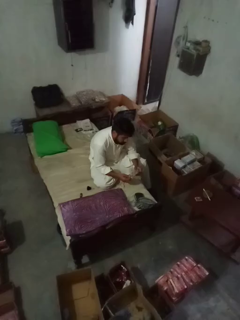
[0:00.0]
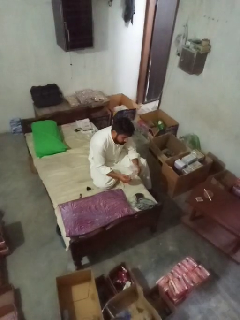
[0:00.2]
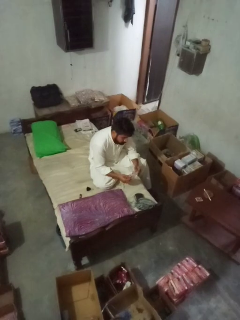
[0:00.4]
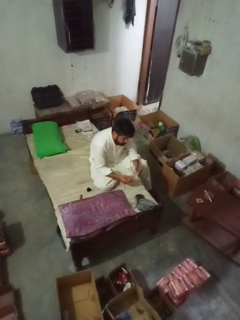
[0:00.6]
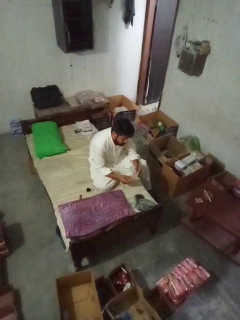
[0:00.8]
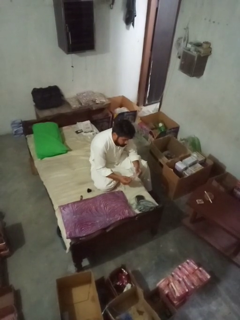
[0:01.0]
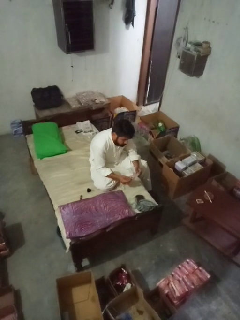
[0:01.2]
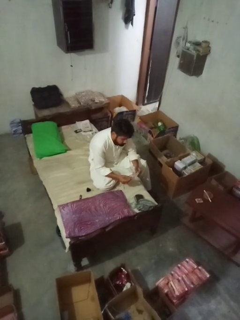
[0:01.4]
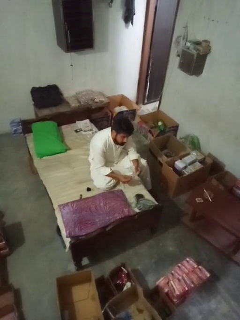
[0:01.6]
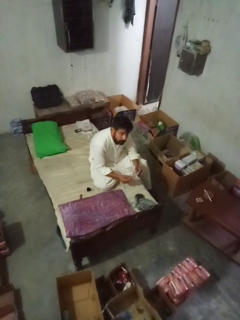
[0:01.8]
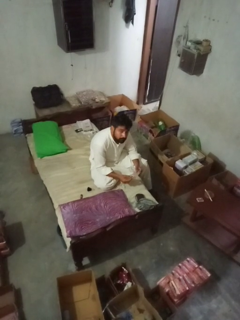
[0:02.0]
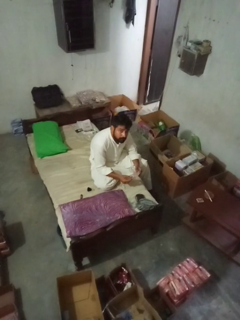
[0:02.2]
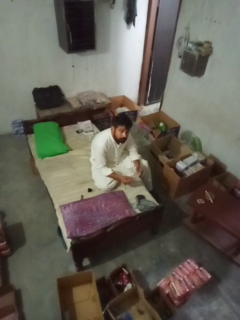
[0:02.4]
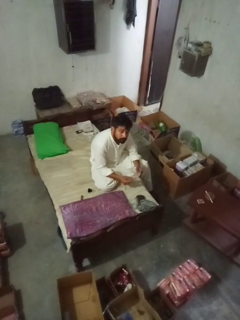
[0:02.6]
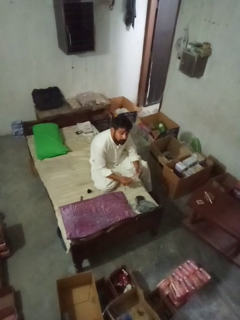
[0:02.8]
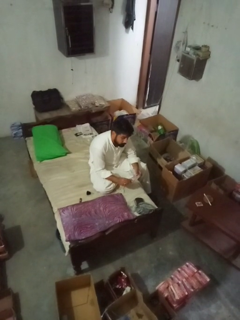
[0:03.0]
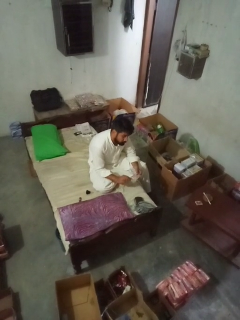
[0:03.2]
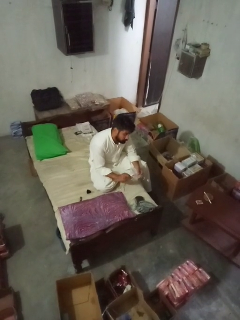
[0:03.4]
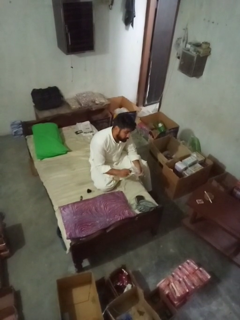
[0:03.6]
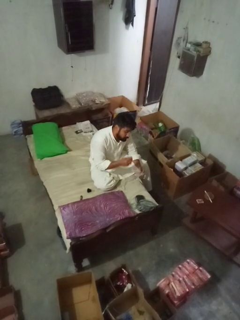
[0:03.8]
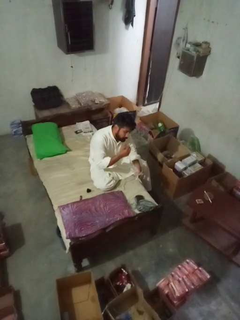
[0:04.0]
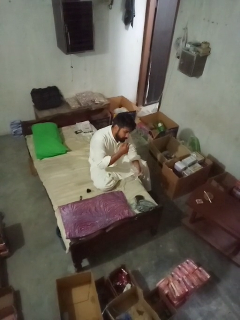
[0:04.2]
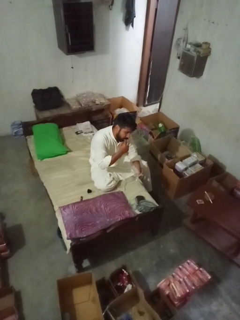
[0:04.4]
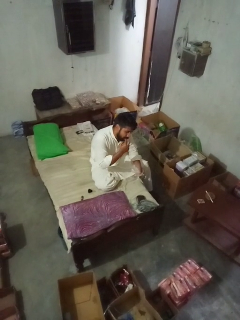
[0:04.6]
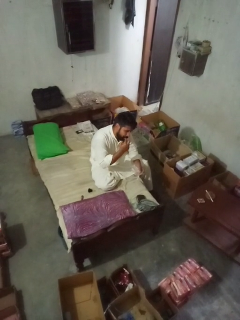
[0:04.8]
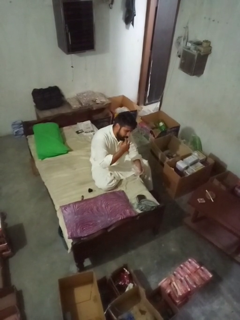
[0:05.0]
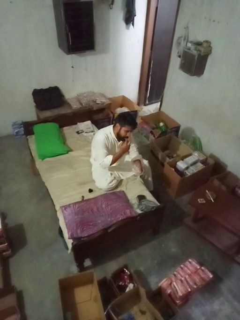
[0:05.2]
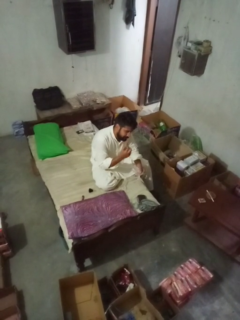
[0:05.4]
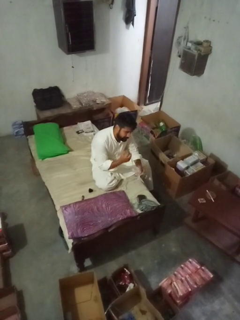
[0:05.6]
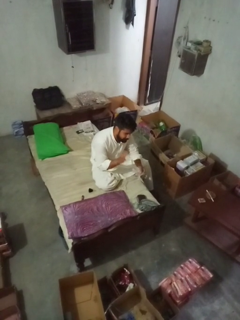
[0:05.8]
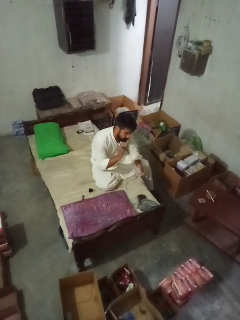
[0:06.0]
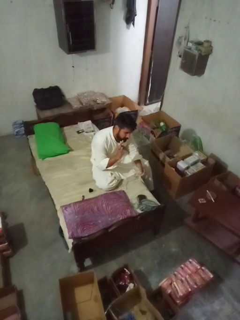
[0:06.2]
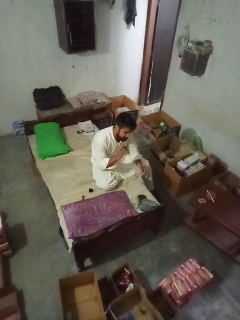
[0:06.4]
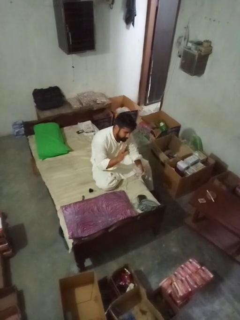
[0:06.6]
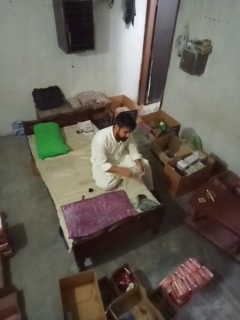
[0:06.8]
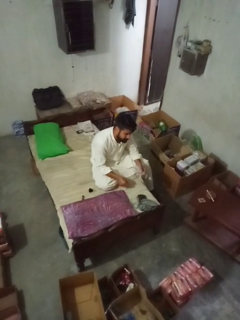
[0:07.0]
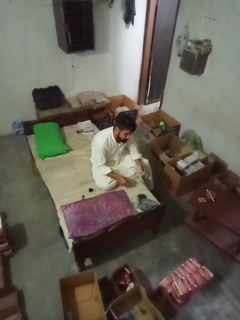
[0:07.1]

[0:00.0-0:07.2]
person licks fingers

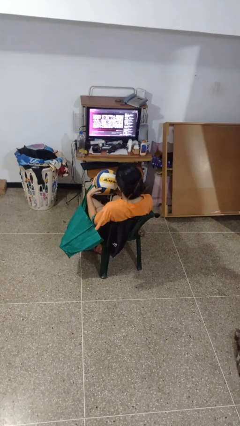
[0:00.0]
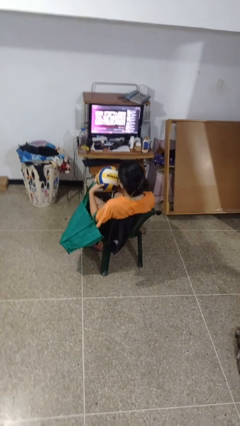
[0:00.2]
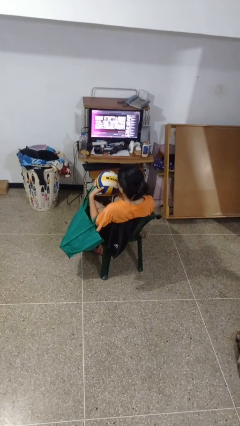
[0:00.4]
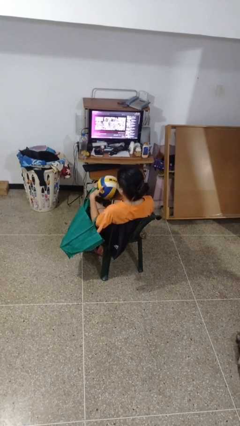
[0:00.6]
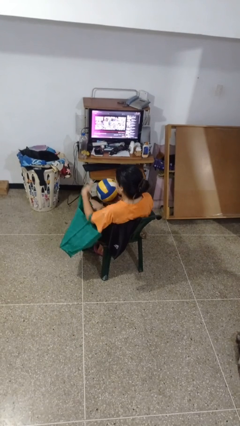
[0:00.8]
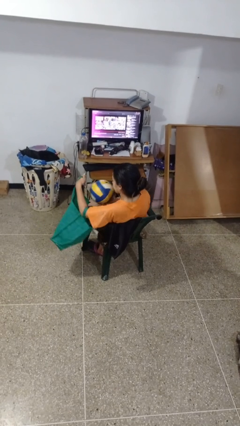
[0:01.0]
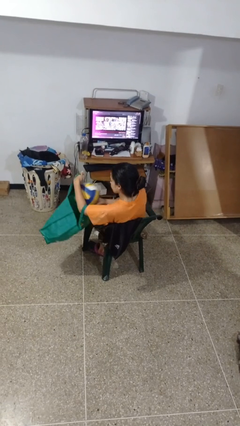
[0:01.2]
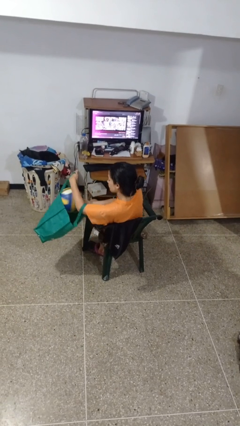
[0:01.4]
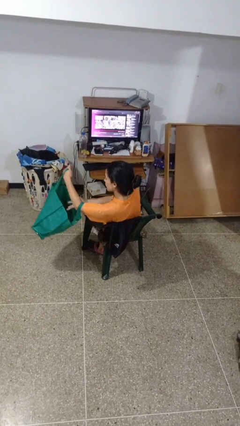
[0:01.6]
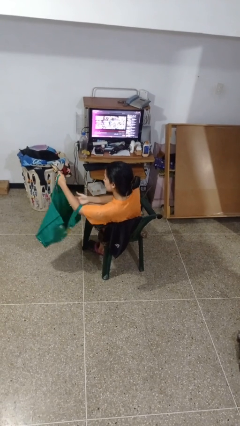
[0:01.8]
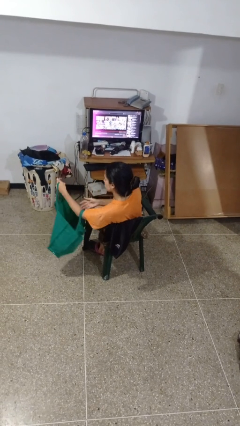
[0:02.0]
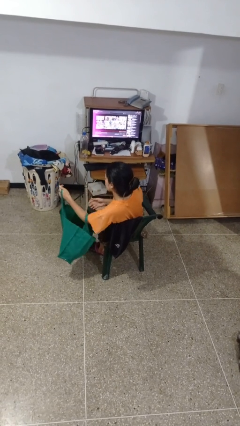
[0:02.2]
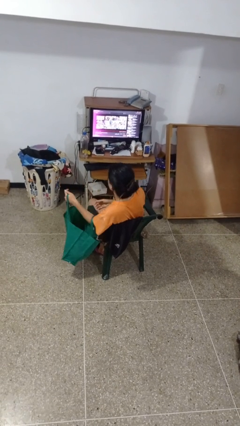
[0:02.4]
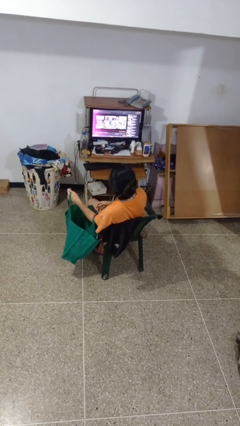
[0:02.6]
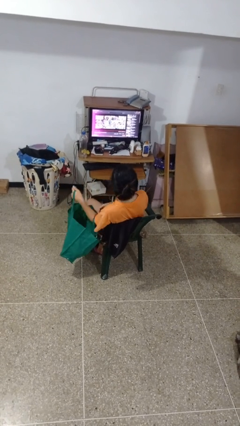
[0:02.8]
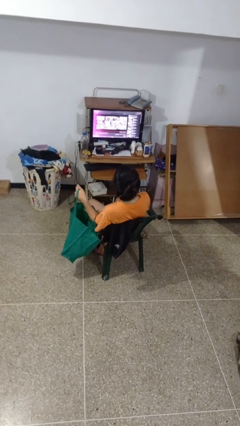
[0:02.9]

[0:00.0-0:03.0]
person puts object into bag

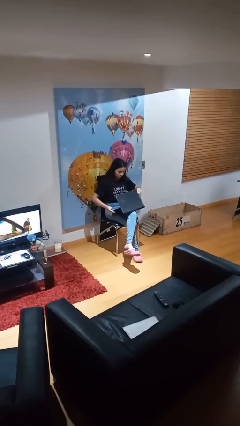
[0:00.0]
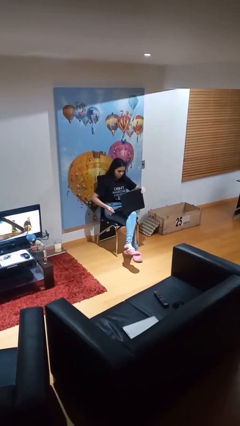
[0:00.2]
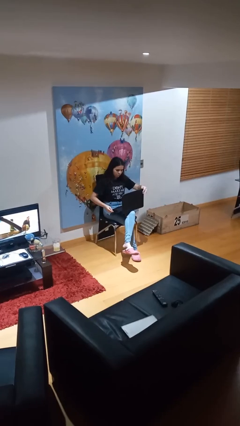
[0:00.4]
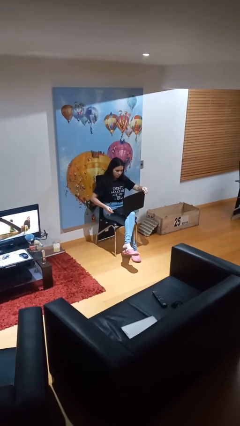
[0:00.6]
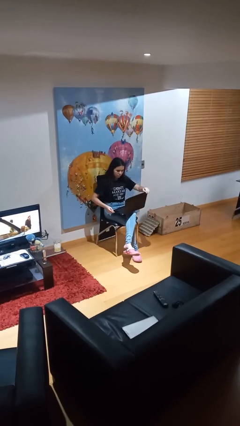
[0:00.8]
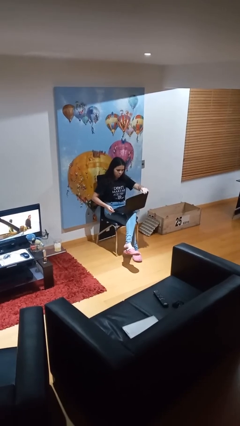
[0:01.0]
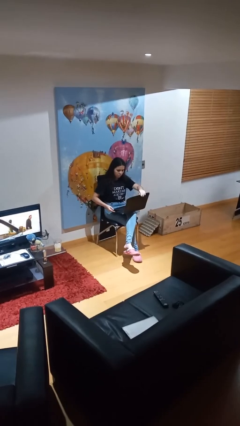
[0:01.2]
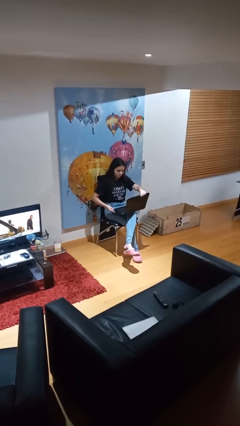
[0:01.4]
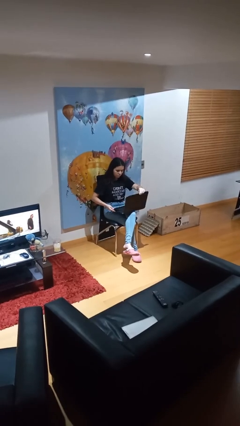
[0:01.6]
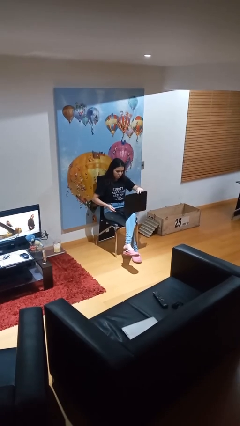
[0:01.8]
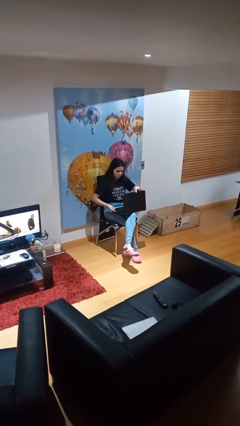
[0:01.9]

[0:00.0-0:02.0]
person interacts with laptop

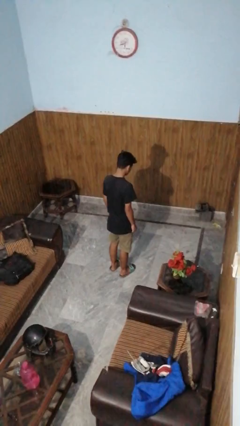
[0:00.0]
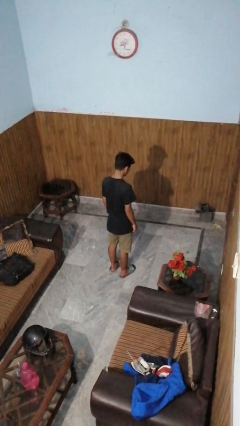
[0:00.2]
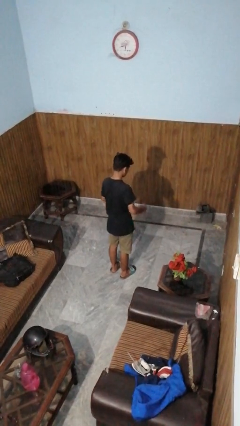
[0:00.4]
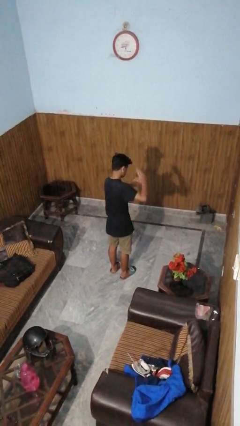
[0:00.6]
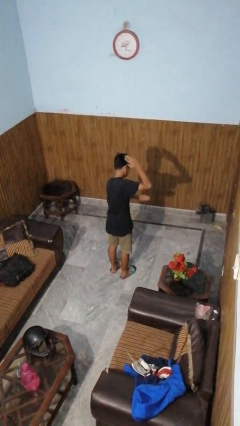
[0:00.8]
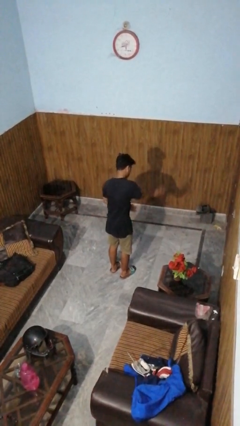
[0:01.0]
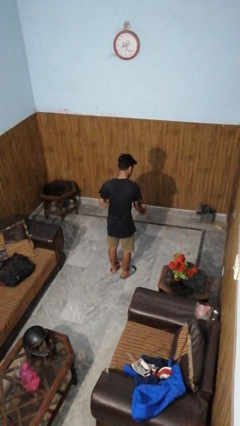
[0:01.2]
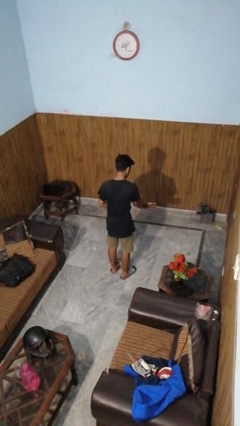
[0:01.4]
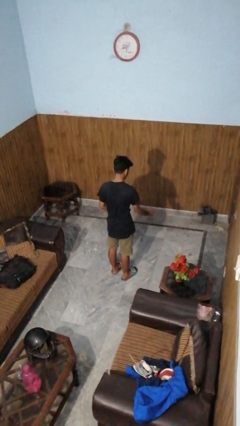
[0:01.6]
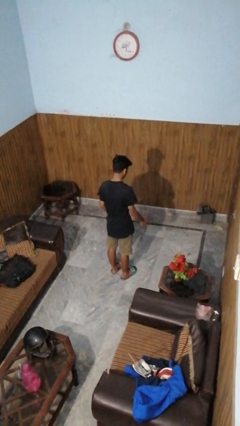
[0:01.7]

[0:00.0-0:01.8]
person karate chop

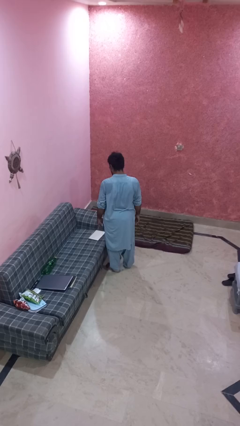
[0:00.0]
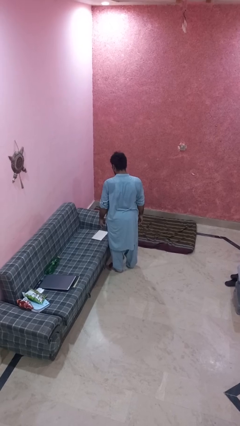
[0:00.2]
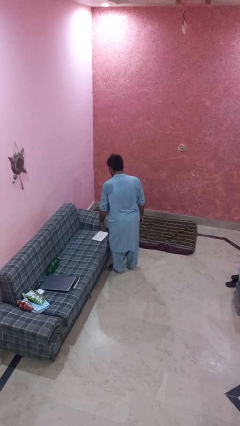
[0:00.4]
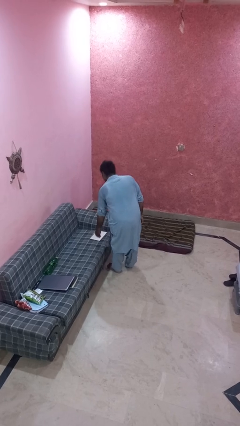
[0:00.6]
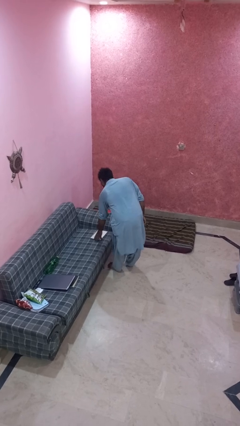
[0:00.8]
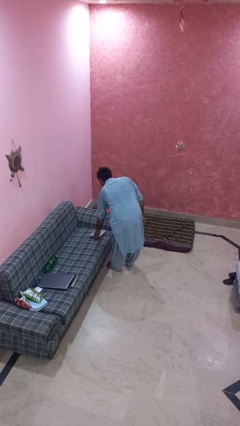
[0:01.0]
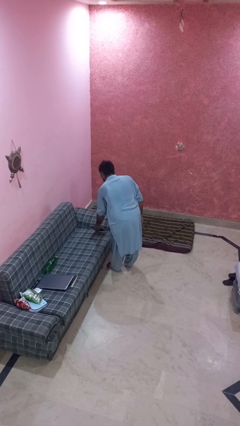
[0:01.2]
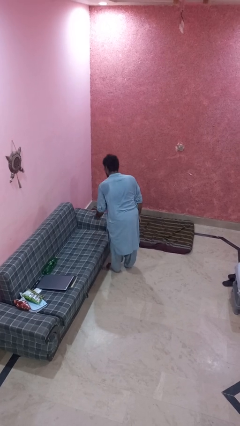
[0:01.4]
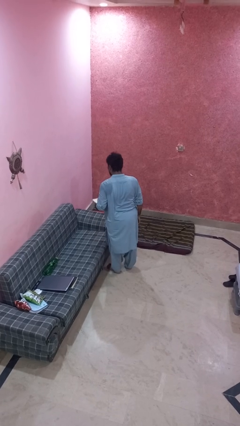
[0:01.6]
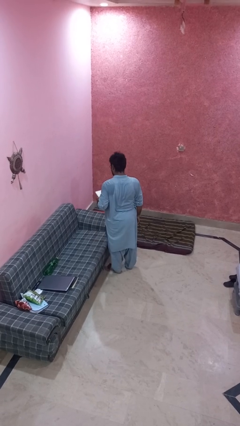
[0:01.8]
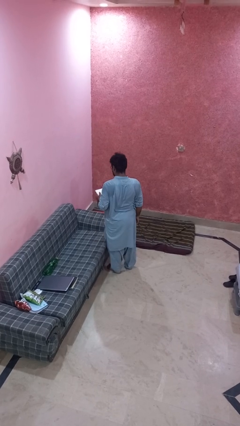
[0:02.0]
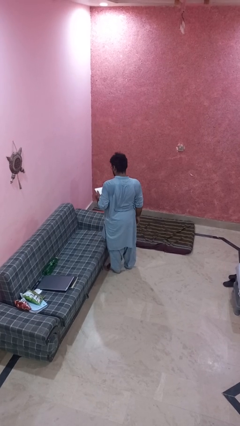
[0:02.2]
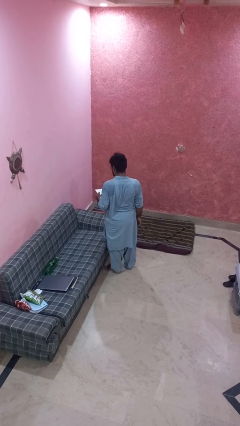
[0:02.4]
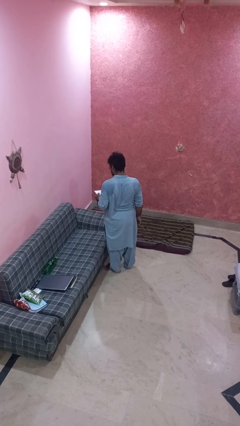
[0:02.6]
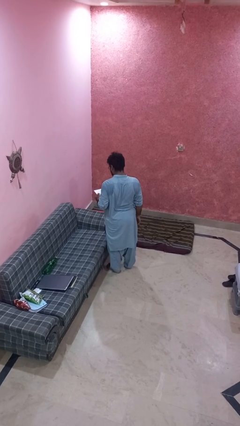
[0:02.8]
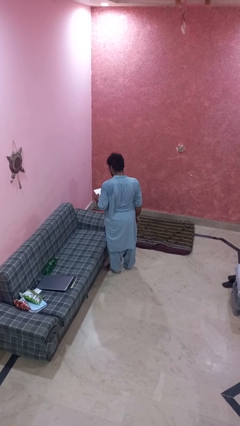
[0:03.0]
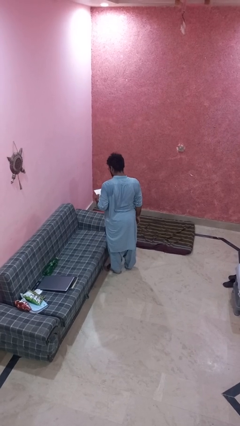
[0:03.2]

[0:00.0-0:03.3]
person picks up object from couch

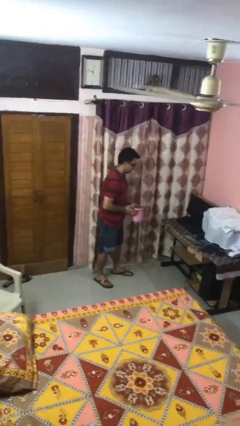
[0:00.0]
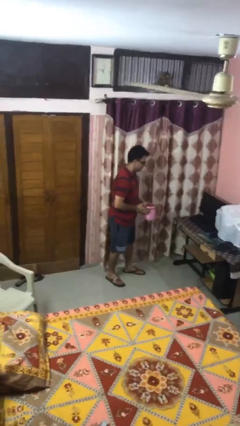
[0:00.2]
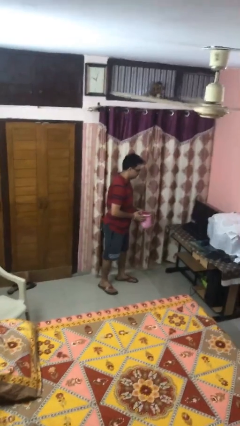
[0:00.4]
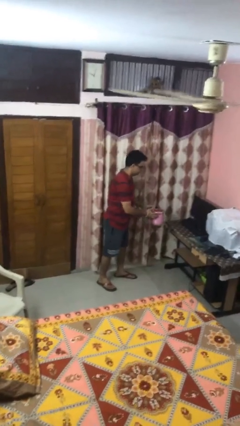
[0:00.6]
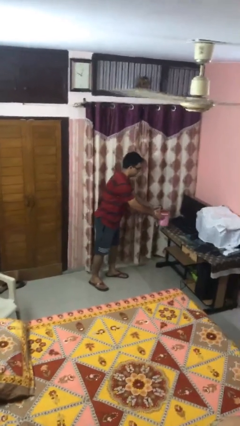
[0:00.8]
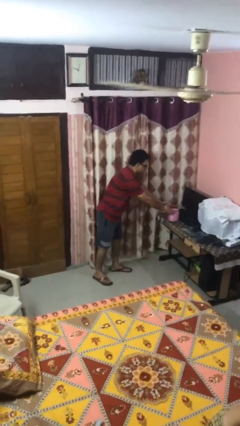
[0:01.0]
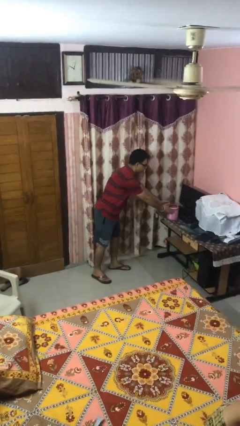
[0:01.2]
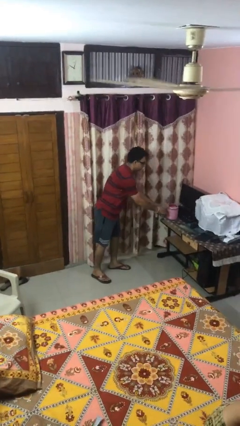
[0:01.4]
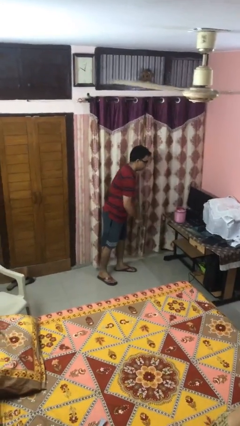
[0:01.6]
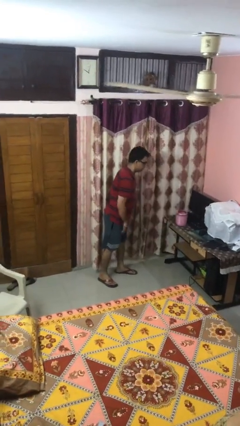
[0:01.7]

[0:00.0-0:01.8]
person puts down object on countertop
